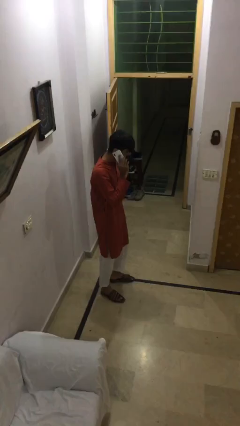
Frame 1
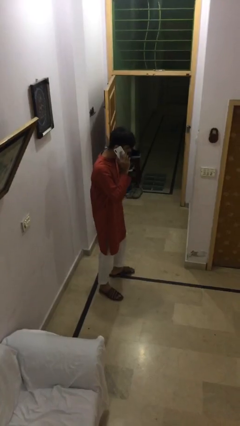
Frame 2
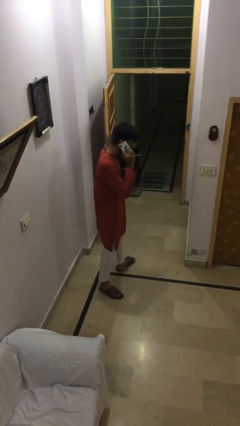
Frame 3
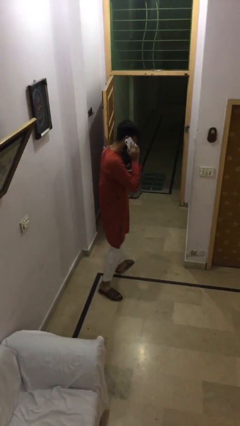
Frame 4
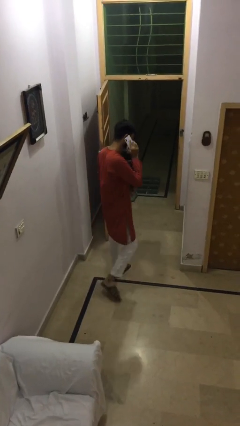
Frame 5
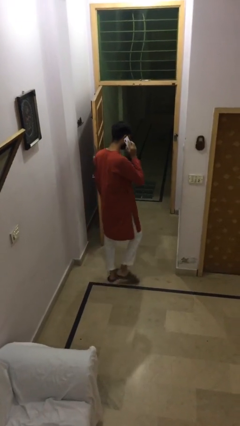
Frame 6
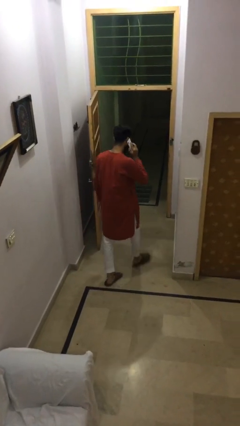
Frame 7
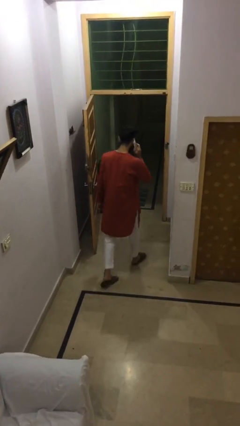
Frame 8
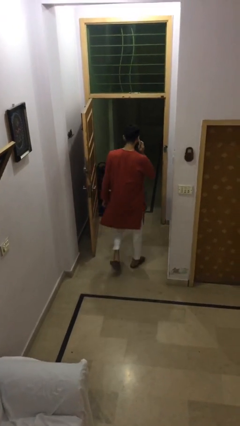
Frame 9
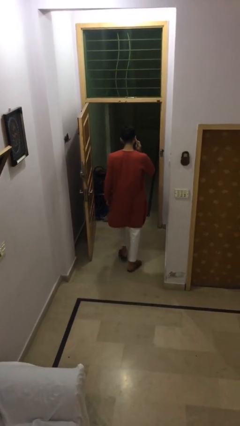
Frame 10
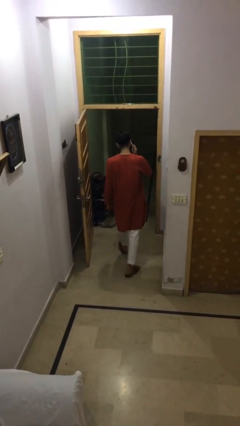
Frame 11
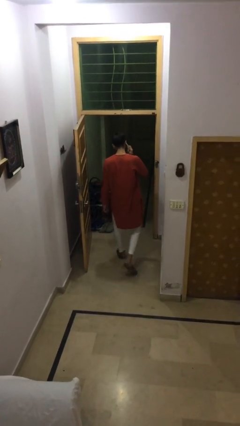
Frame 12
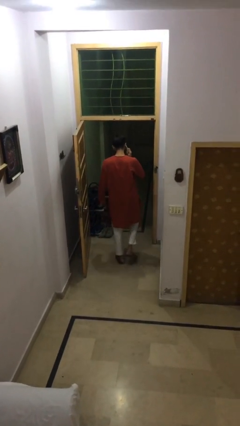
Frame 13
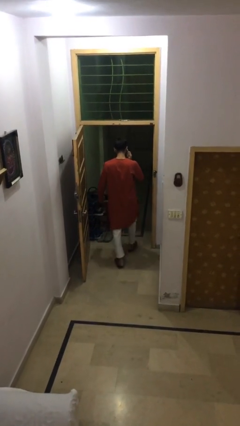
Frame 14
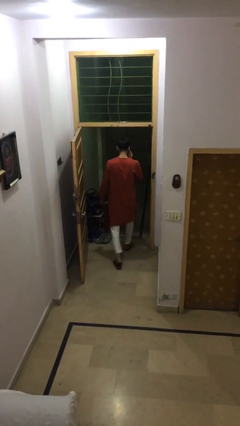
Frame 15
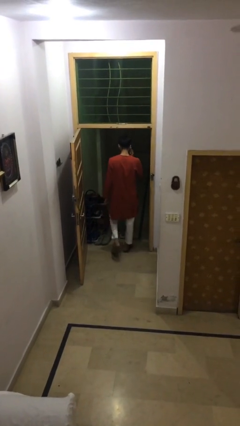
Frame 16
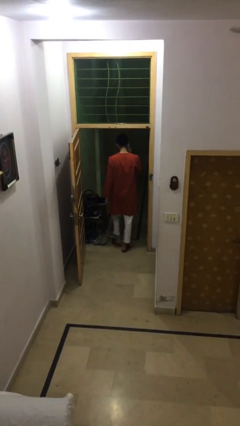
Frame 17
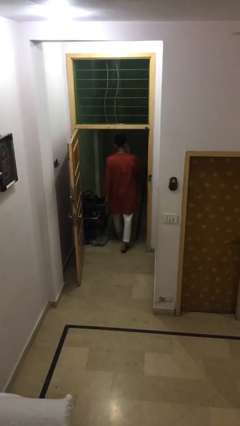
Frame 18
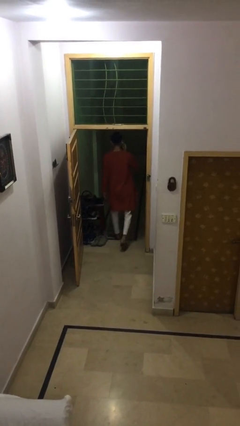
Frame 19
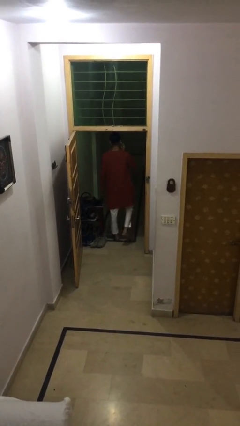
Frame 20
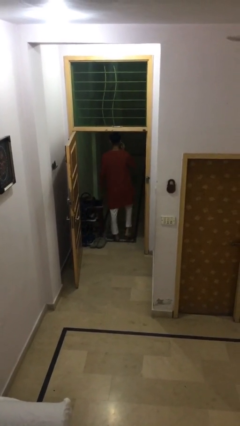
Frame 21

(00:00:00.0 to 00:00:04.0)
person exits scene through structure

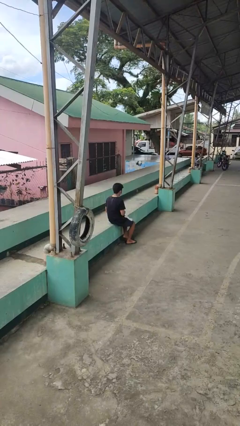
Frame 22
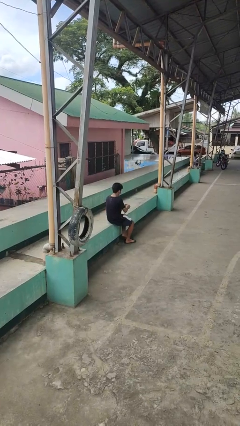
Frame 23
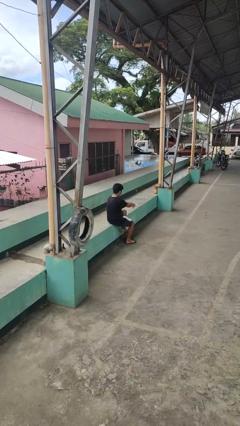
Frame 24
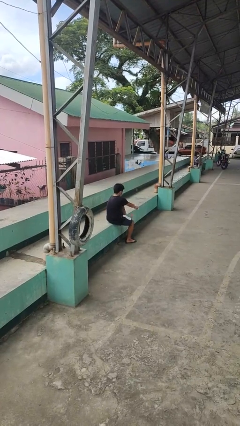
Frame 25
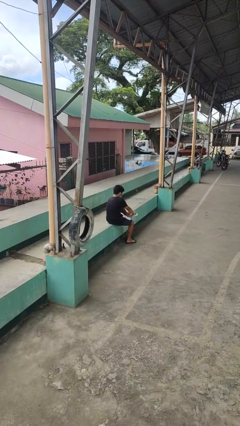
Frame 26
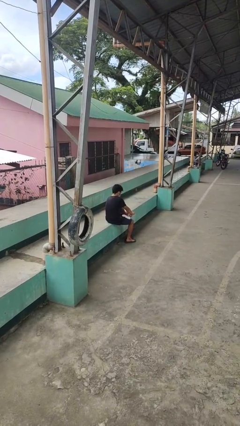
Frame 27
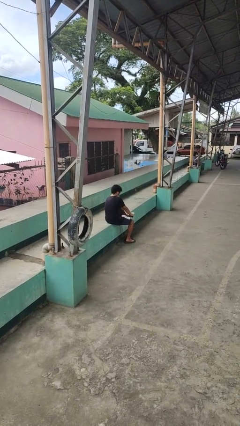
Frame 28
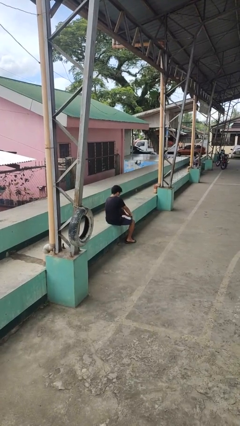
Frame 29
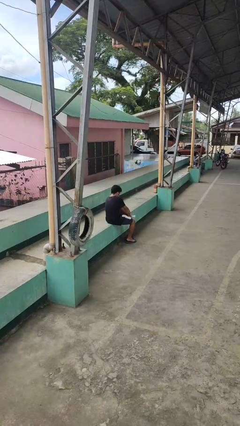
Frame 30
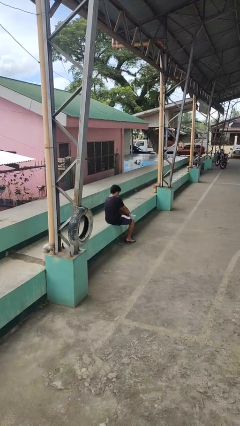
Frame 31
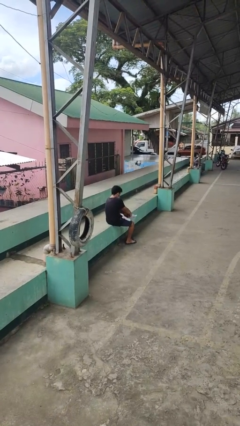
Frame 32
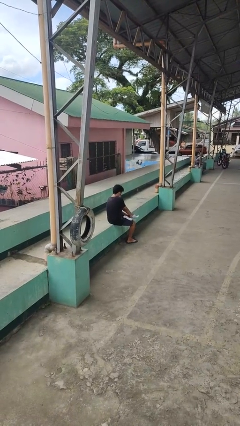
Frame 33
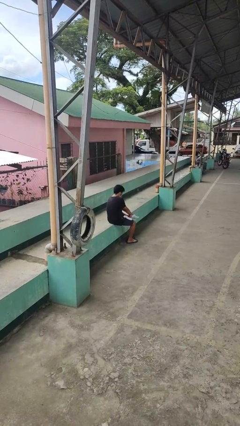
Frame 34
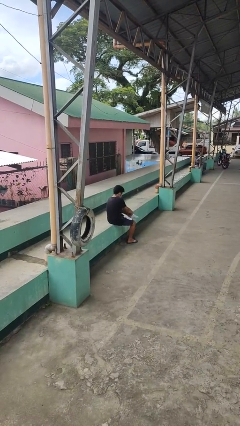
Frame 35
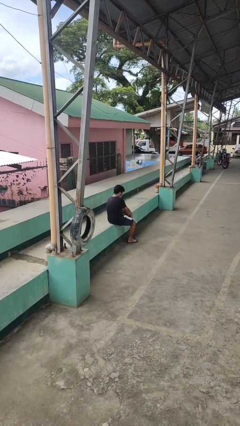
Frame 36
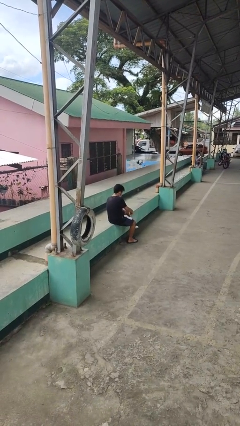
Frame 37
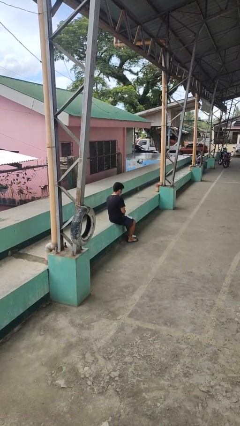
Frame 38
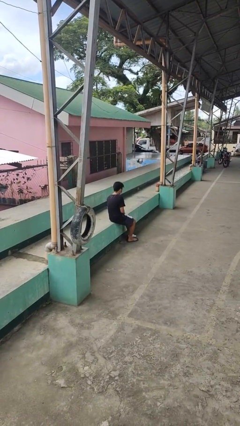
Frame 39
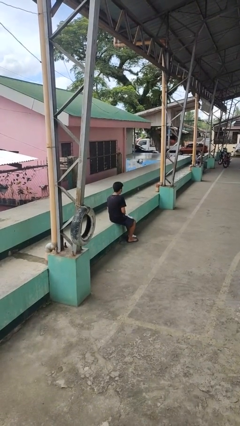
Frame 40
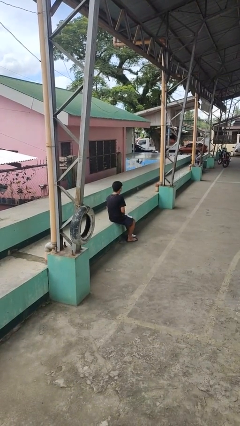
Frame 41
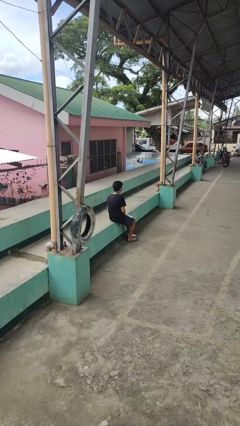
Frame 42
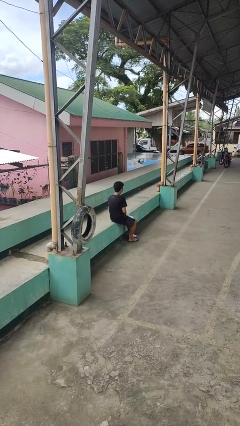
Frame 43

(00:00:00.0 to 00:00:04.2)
person puts on socks

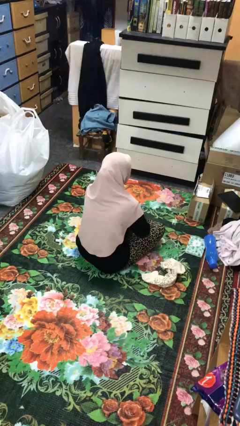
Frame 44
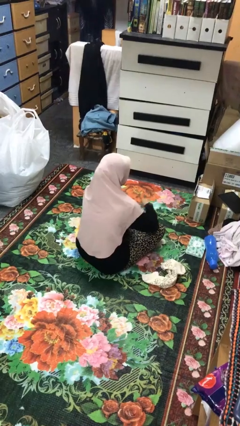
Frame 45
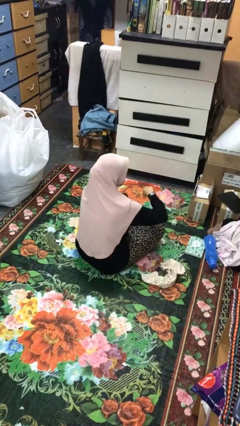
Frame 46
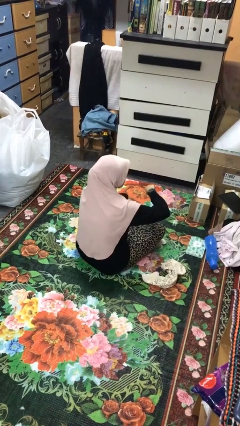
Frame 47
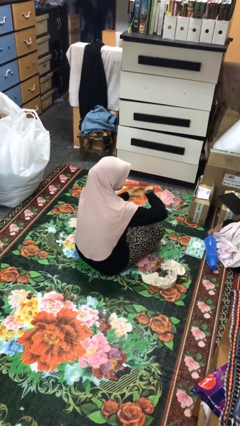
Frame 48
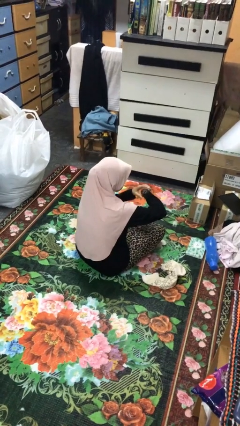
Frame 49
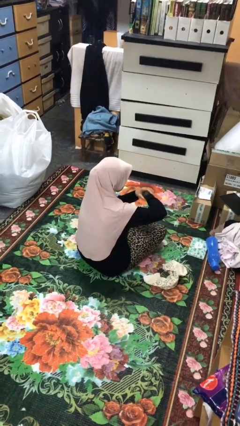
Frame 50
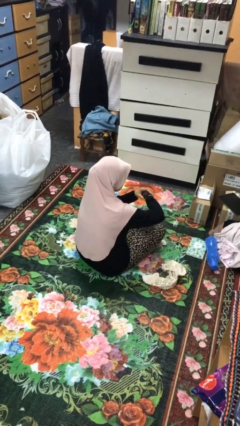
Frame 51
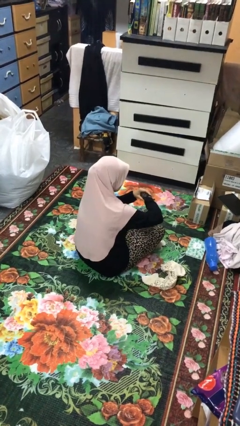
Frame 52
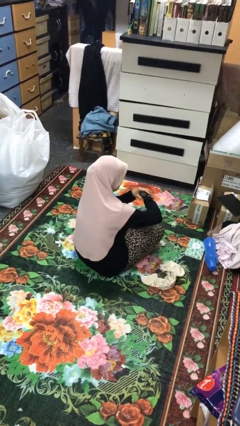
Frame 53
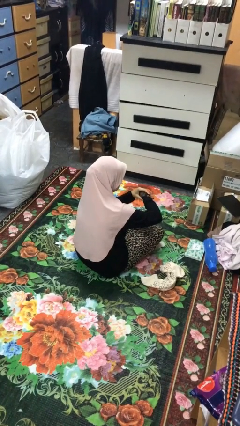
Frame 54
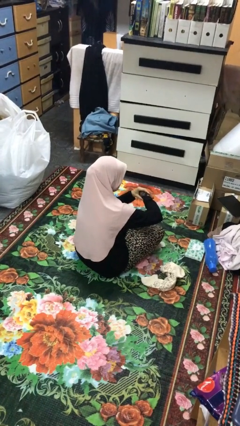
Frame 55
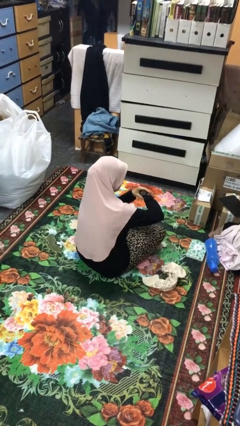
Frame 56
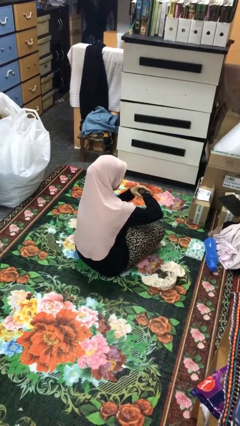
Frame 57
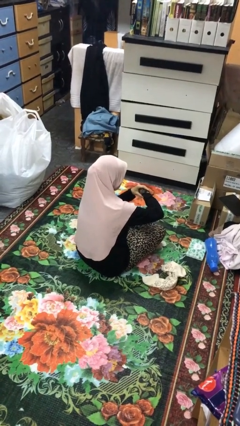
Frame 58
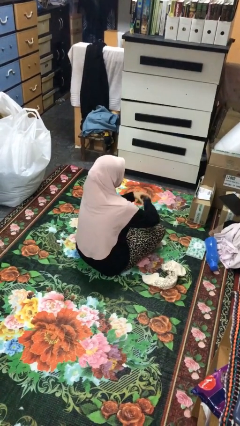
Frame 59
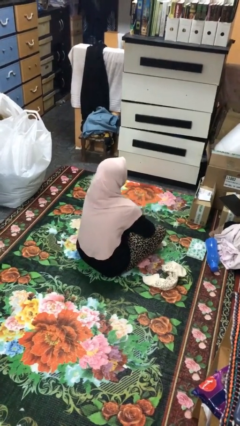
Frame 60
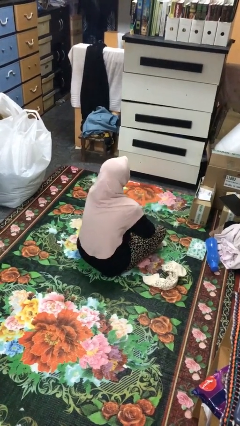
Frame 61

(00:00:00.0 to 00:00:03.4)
person looks at wristwatch

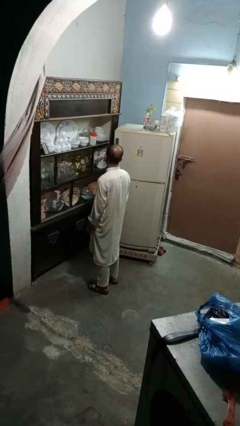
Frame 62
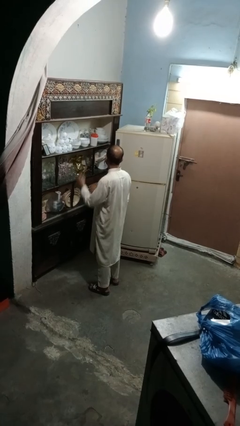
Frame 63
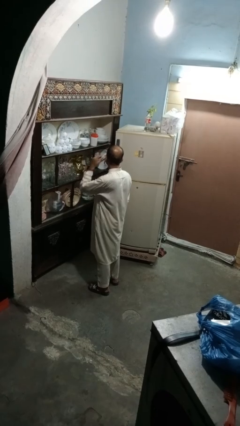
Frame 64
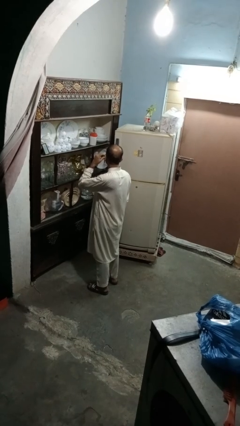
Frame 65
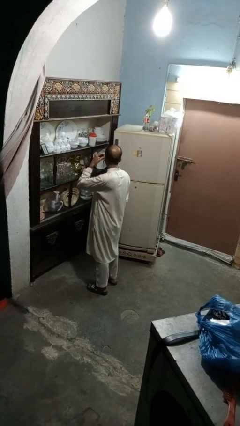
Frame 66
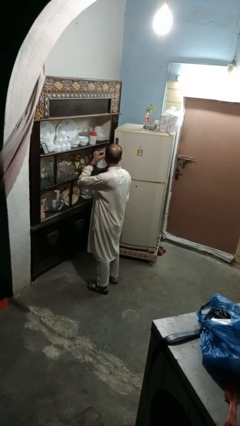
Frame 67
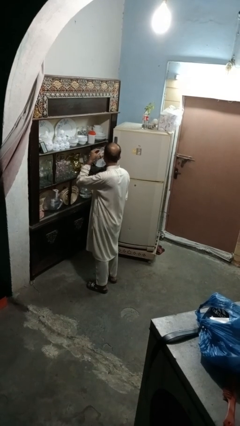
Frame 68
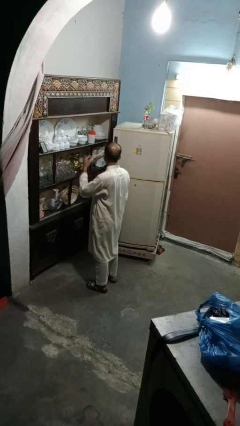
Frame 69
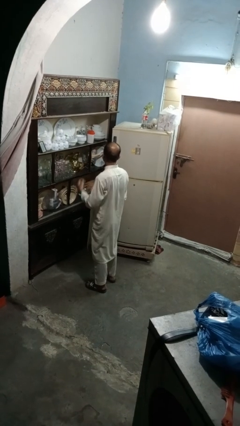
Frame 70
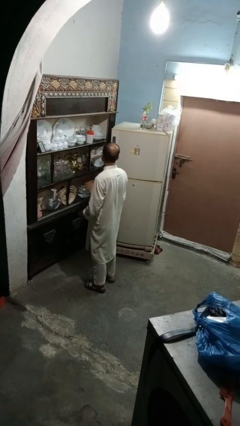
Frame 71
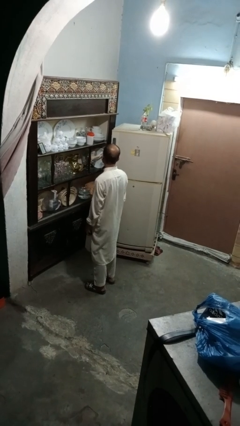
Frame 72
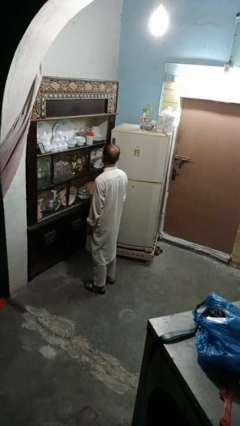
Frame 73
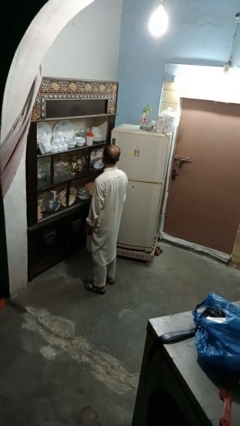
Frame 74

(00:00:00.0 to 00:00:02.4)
person takes off earrings

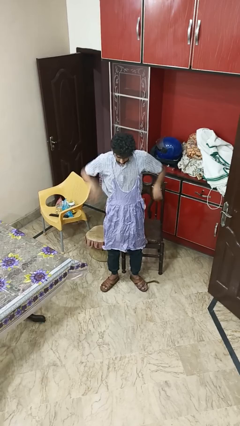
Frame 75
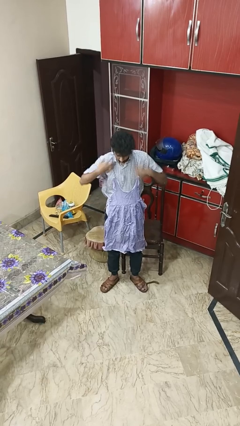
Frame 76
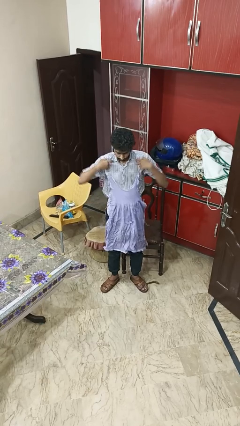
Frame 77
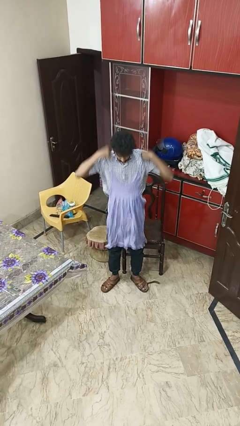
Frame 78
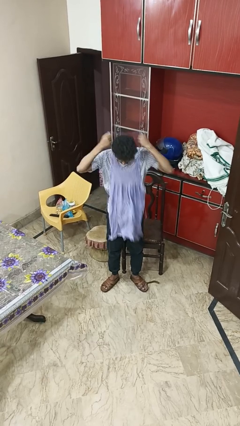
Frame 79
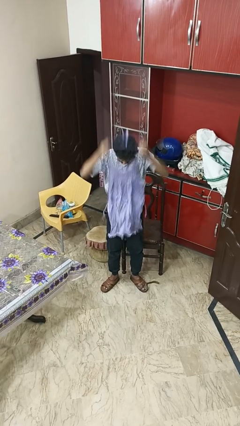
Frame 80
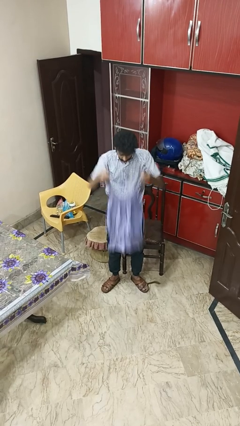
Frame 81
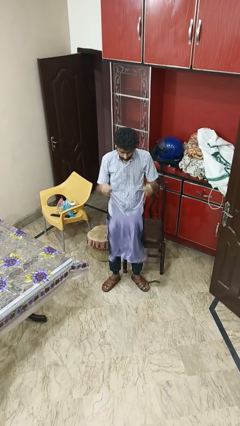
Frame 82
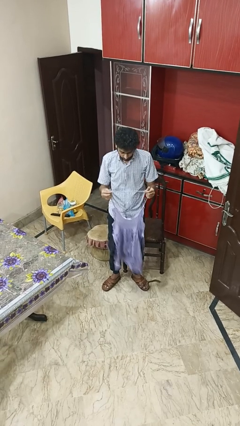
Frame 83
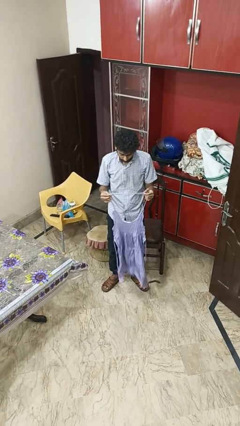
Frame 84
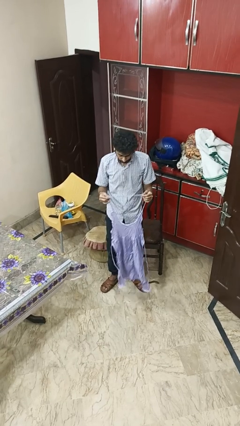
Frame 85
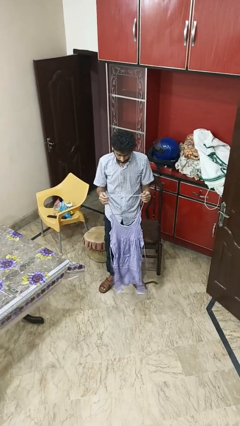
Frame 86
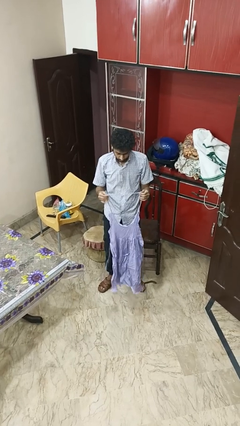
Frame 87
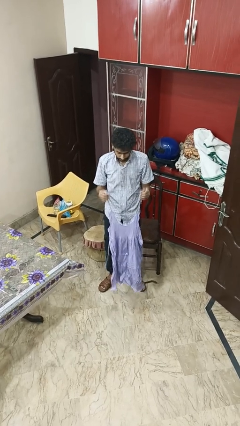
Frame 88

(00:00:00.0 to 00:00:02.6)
person takes off apron

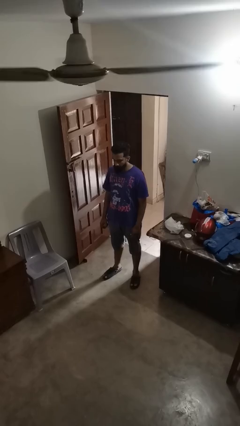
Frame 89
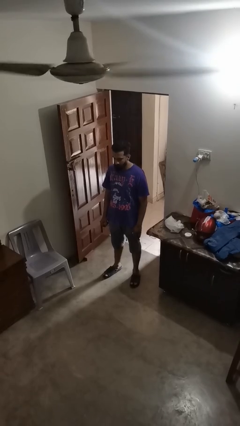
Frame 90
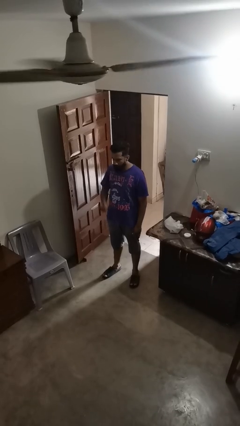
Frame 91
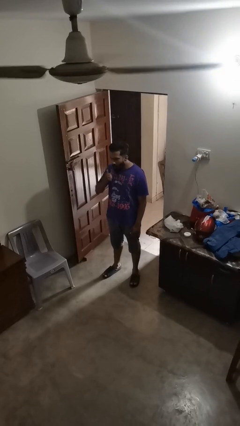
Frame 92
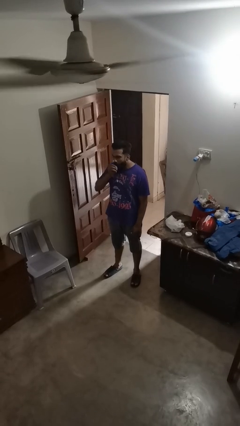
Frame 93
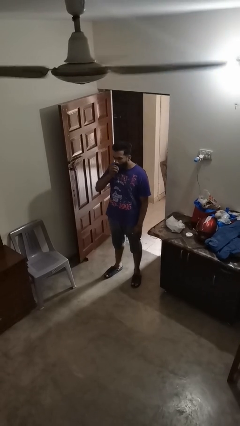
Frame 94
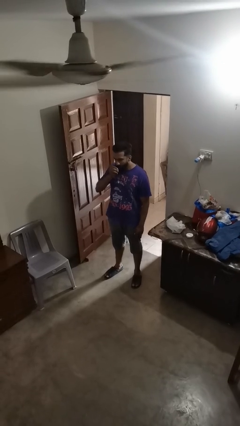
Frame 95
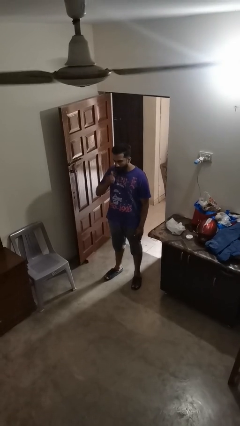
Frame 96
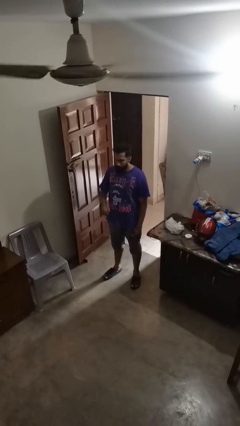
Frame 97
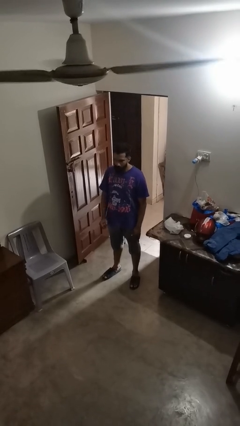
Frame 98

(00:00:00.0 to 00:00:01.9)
person eats apple
